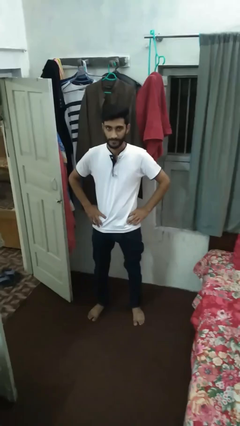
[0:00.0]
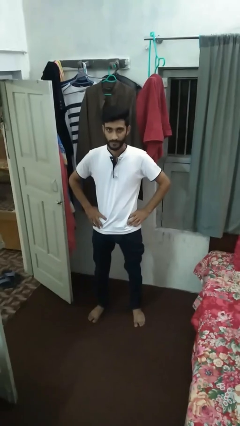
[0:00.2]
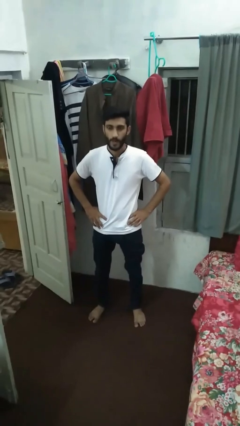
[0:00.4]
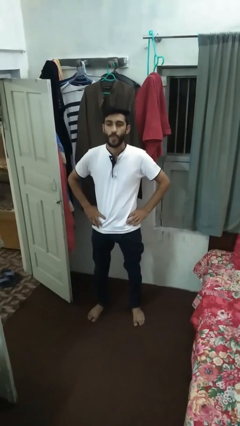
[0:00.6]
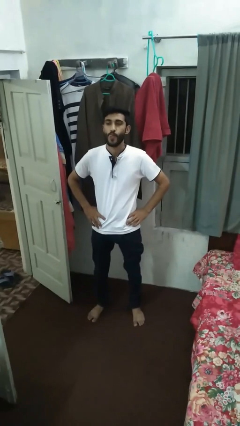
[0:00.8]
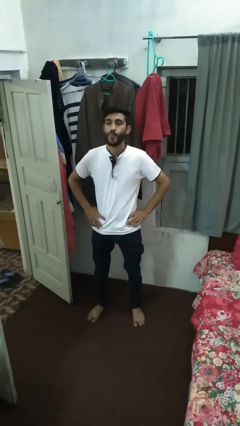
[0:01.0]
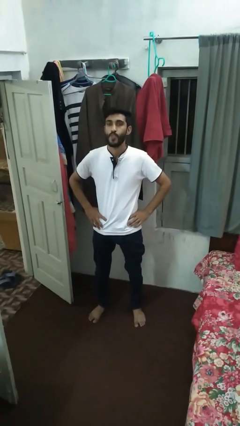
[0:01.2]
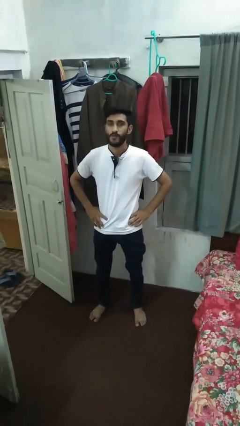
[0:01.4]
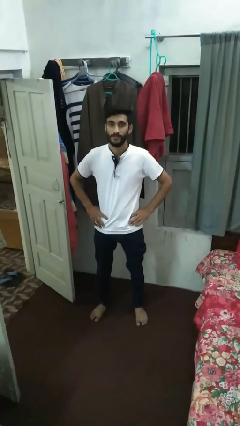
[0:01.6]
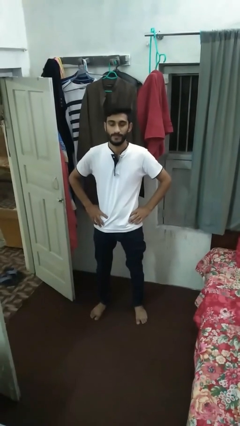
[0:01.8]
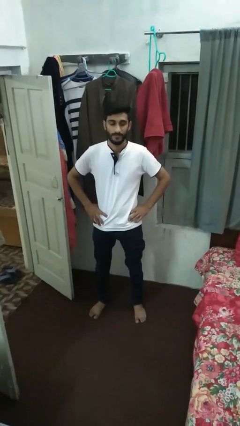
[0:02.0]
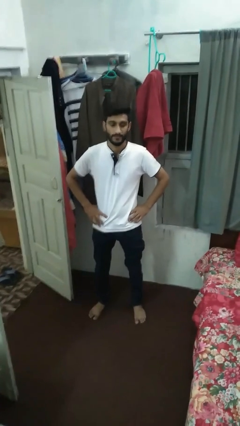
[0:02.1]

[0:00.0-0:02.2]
person sticks out tongue

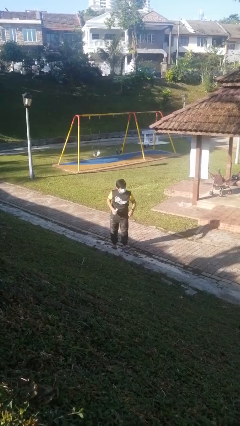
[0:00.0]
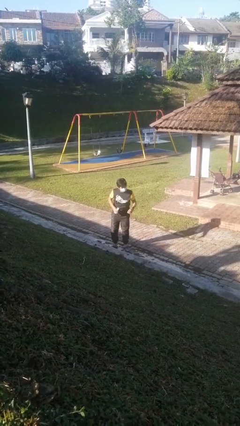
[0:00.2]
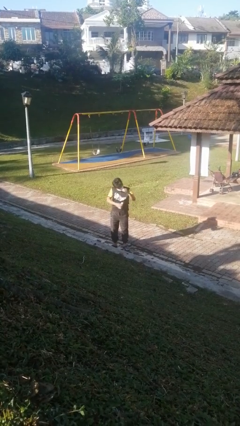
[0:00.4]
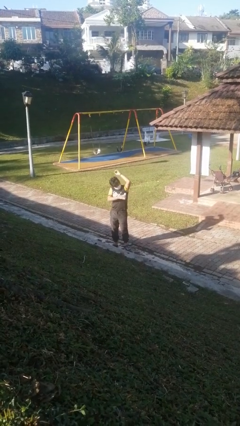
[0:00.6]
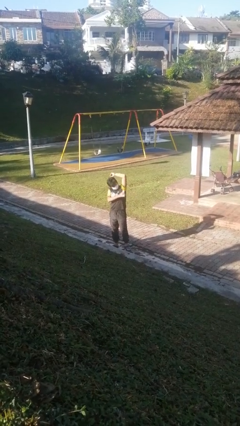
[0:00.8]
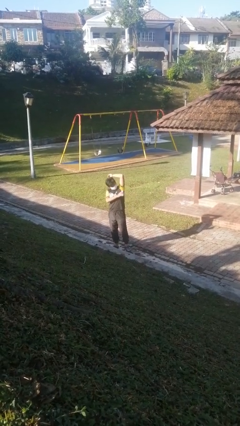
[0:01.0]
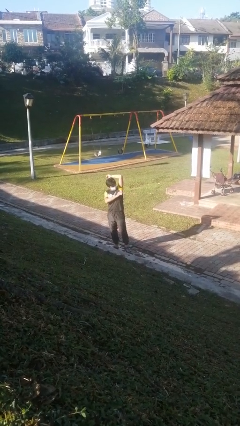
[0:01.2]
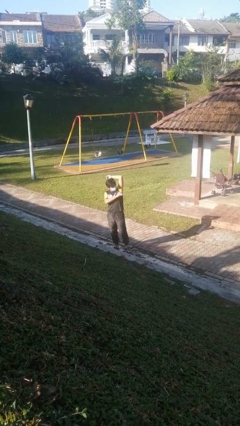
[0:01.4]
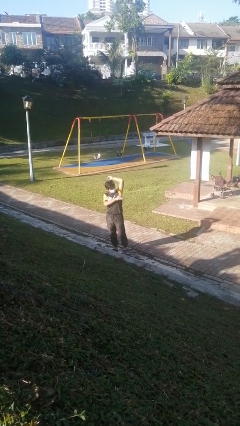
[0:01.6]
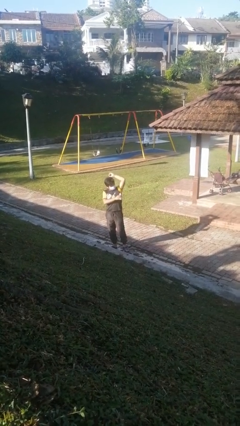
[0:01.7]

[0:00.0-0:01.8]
person applies deodorant

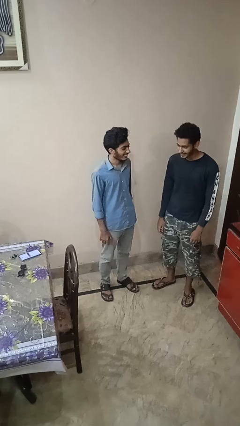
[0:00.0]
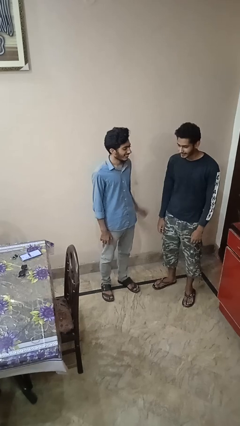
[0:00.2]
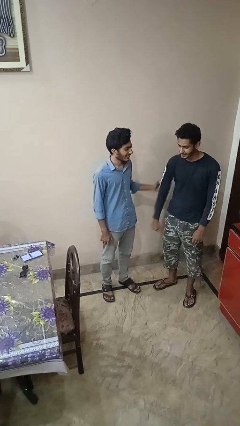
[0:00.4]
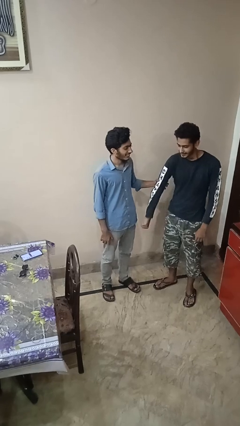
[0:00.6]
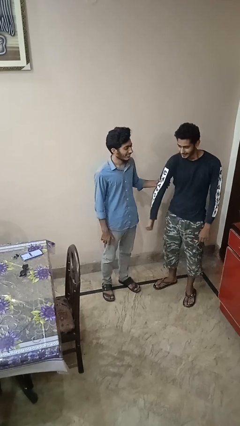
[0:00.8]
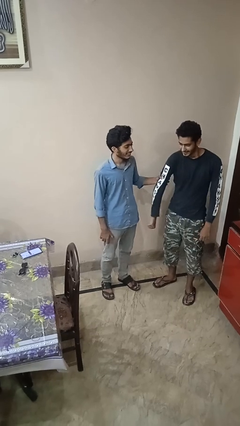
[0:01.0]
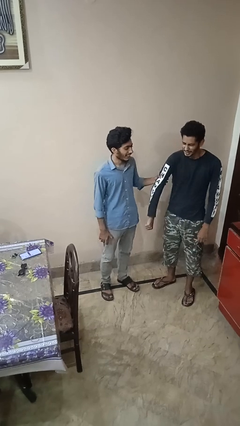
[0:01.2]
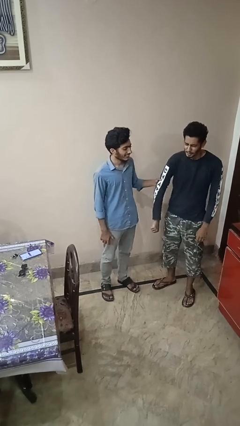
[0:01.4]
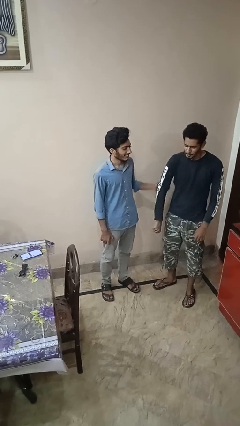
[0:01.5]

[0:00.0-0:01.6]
person grabs person by bicep

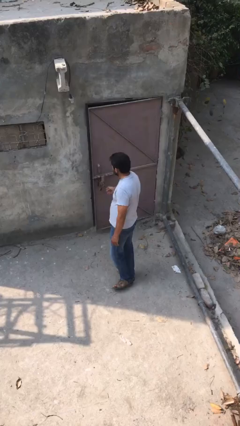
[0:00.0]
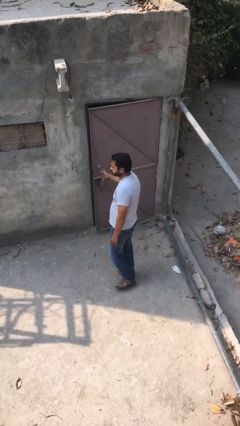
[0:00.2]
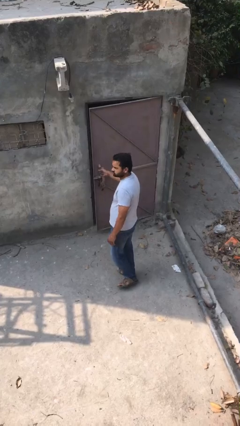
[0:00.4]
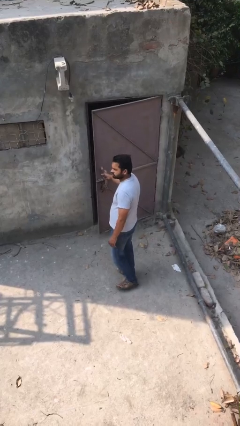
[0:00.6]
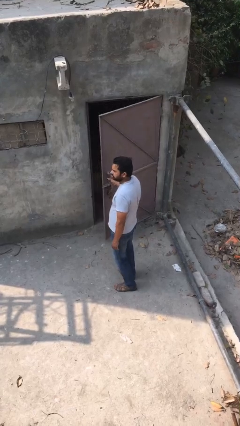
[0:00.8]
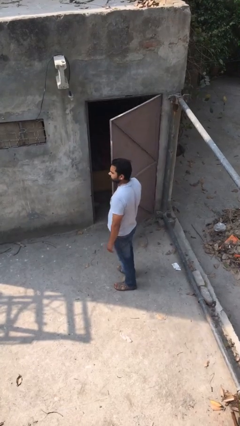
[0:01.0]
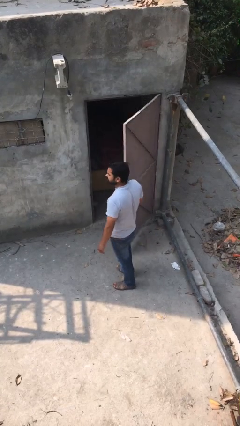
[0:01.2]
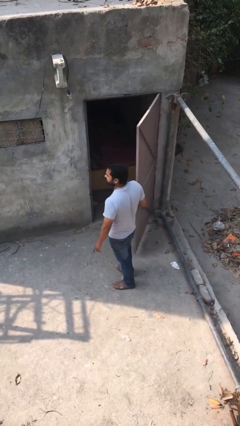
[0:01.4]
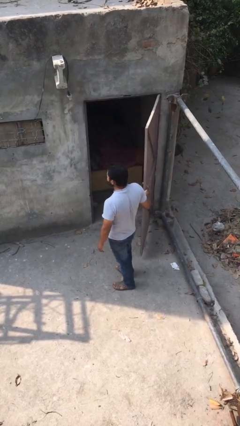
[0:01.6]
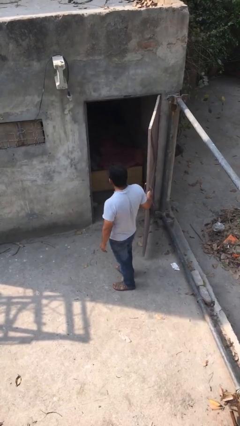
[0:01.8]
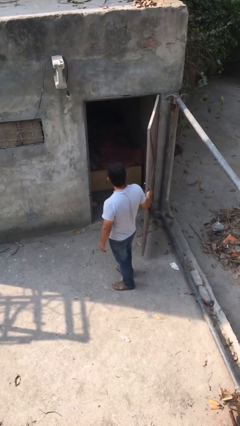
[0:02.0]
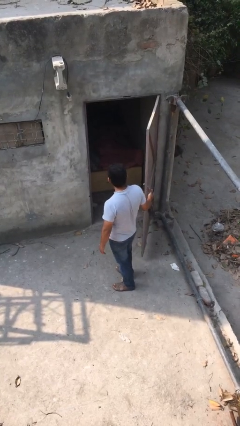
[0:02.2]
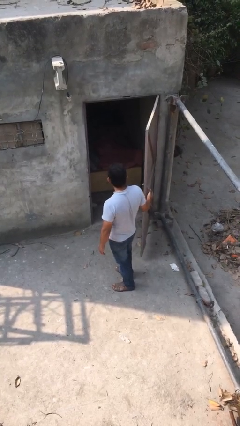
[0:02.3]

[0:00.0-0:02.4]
person opens facility door

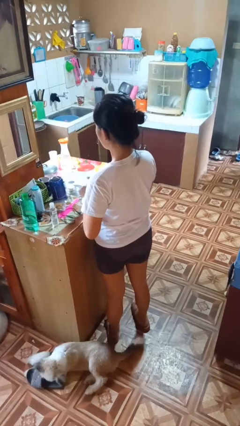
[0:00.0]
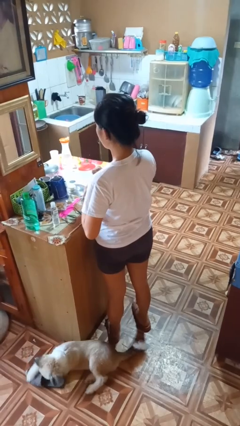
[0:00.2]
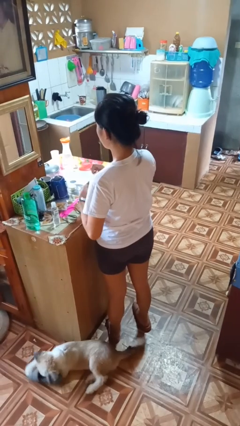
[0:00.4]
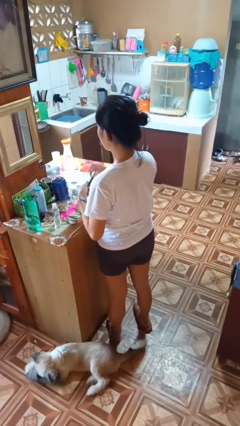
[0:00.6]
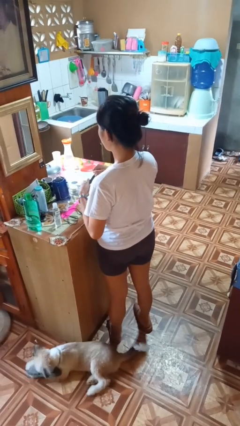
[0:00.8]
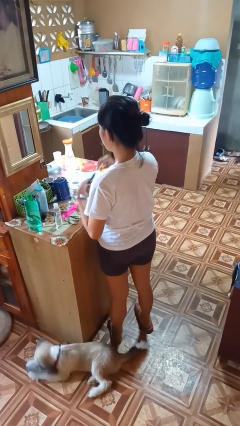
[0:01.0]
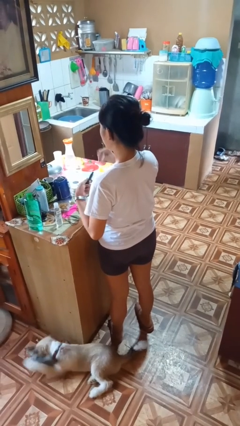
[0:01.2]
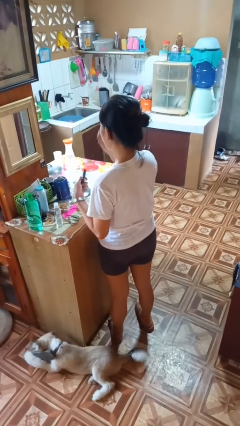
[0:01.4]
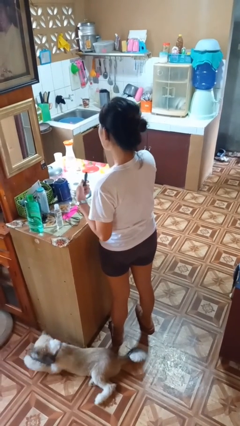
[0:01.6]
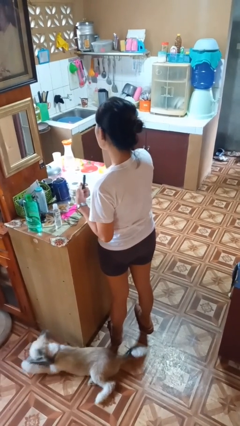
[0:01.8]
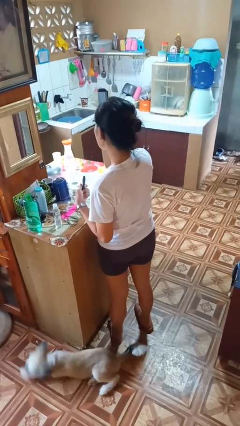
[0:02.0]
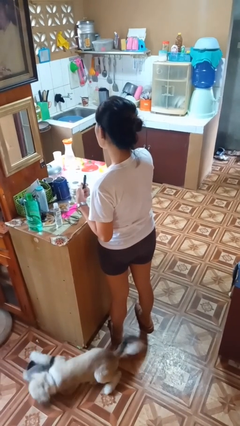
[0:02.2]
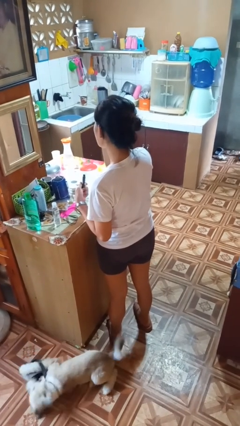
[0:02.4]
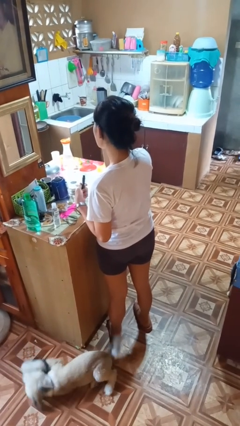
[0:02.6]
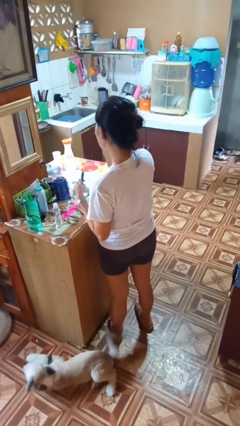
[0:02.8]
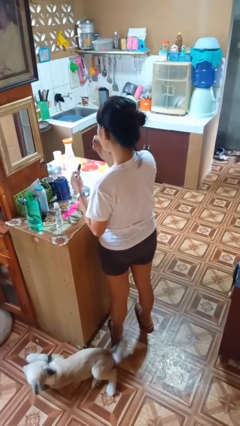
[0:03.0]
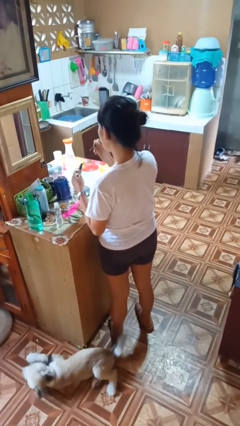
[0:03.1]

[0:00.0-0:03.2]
person applies eye makeup

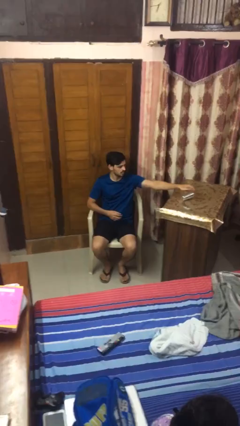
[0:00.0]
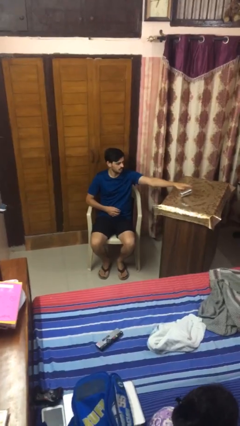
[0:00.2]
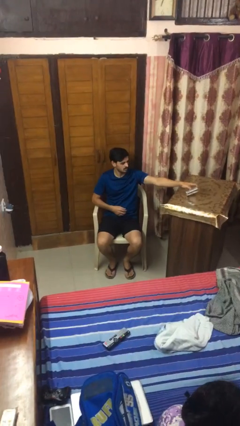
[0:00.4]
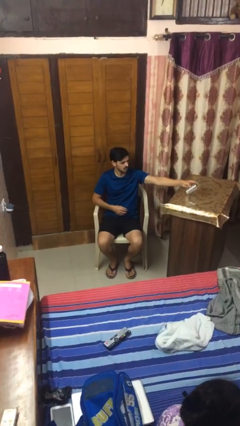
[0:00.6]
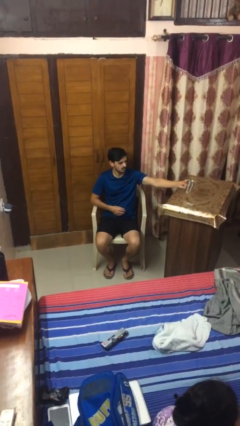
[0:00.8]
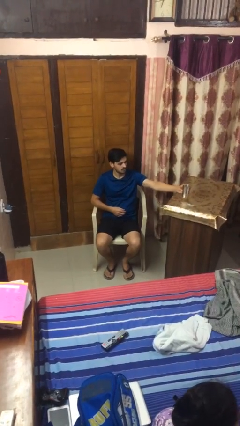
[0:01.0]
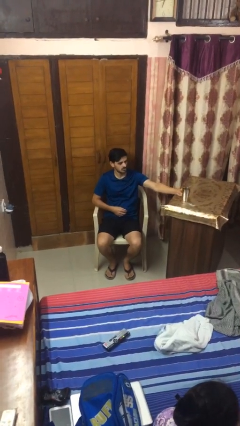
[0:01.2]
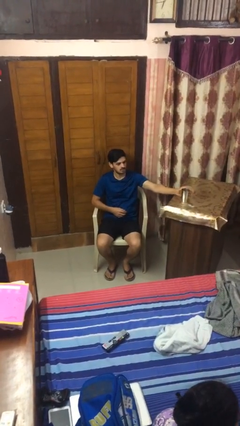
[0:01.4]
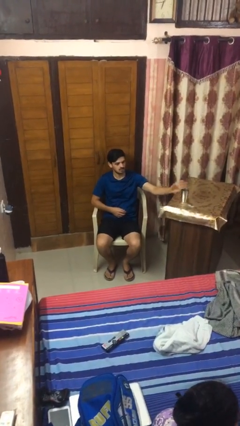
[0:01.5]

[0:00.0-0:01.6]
person sets upright glass

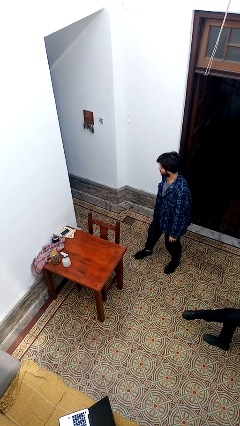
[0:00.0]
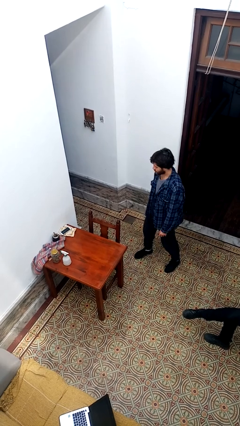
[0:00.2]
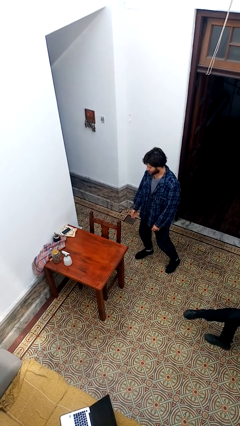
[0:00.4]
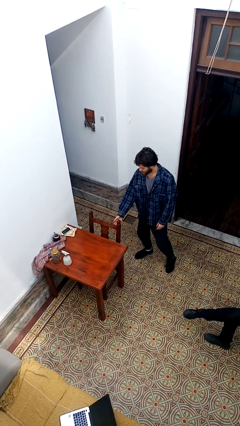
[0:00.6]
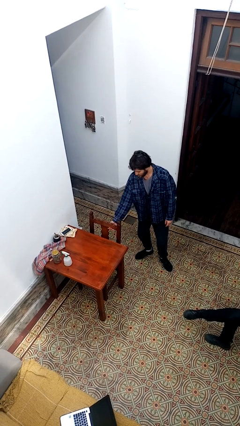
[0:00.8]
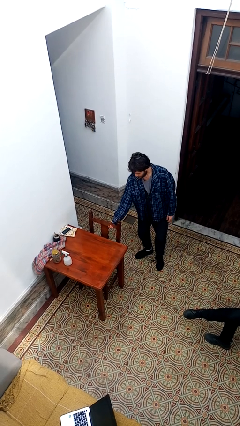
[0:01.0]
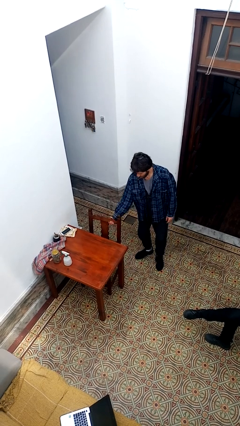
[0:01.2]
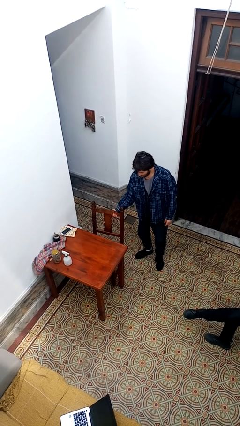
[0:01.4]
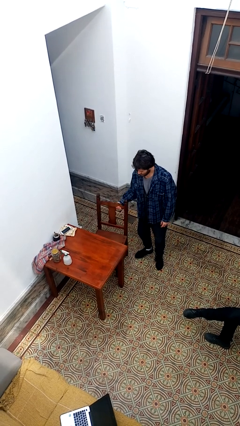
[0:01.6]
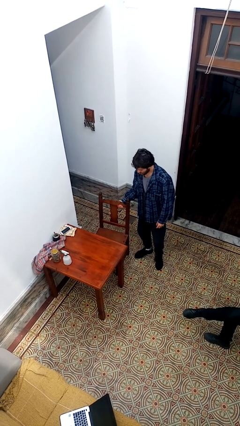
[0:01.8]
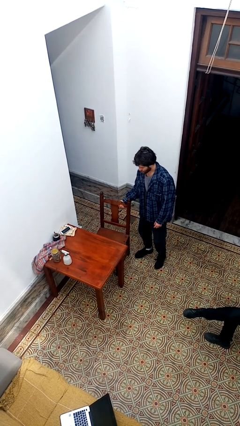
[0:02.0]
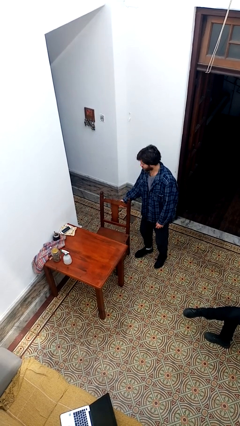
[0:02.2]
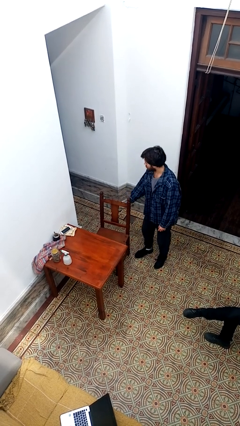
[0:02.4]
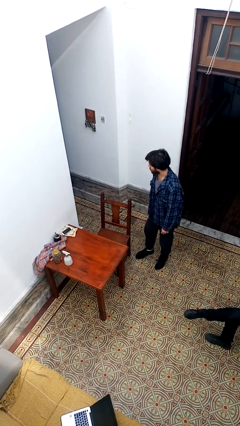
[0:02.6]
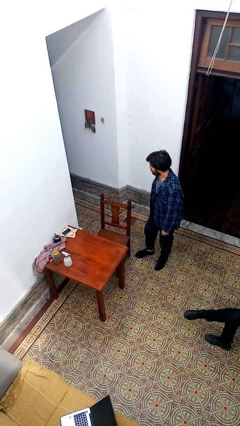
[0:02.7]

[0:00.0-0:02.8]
person pulls out chair

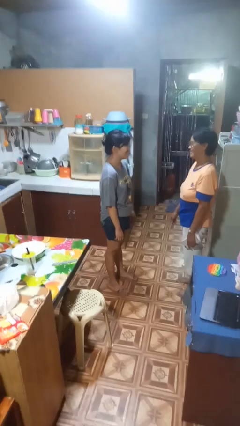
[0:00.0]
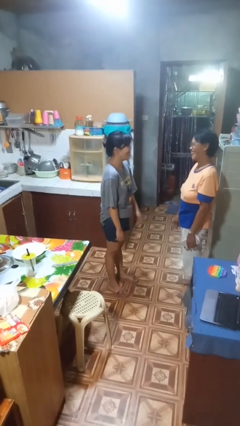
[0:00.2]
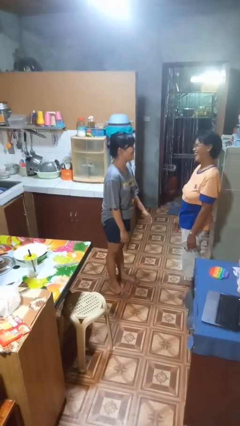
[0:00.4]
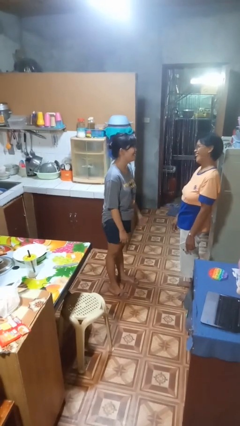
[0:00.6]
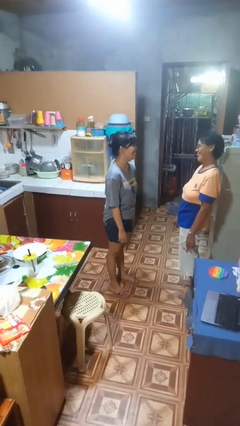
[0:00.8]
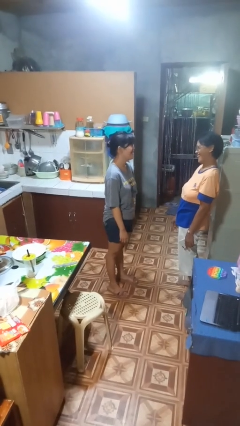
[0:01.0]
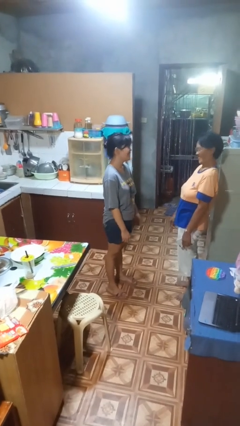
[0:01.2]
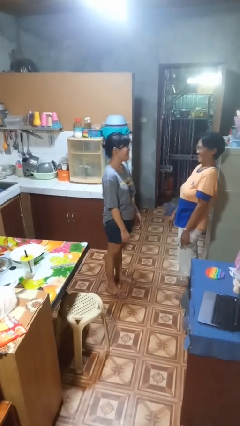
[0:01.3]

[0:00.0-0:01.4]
person laughs with person
